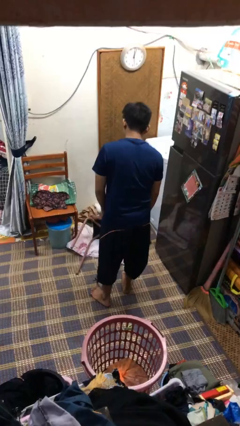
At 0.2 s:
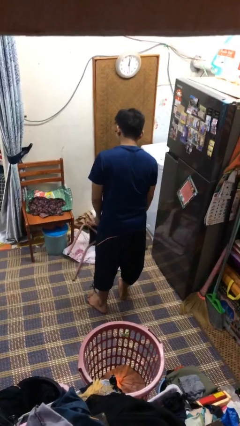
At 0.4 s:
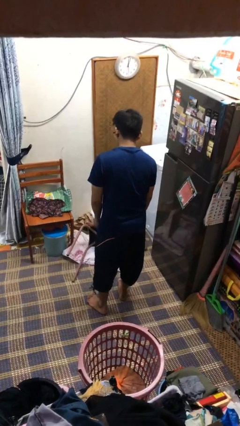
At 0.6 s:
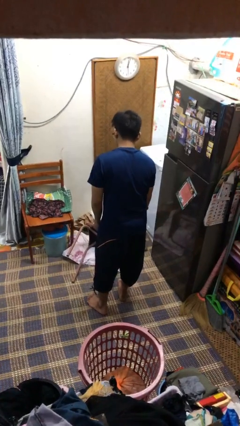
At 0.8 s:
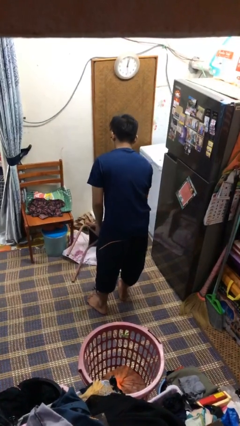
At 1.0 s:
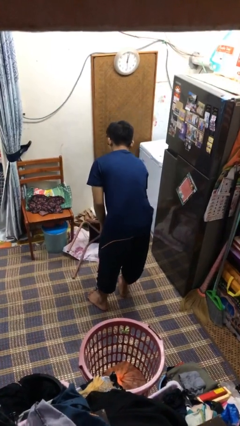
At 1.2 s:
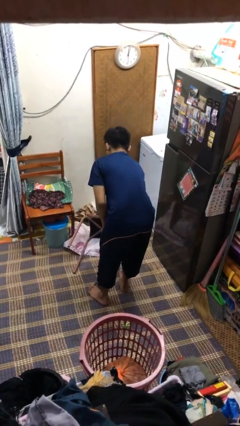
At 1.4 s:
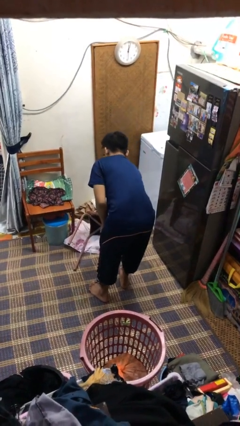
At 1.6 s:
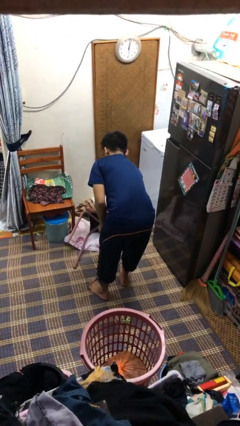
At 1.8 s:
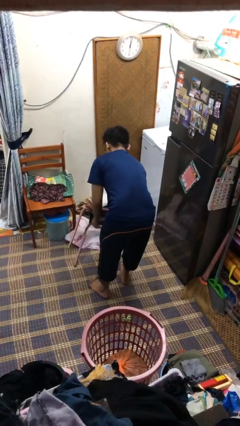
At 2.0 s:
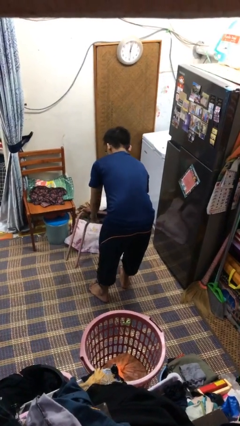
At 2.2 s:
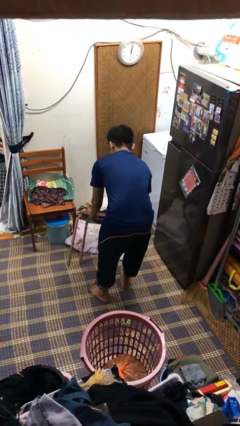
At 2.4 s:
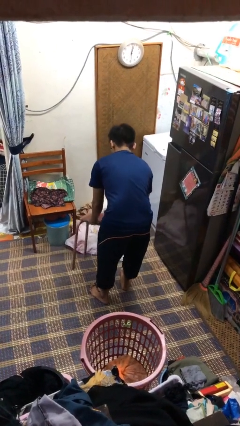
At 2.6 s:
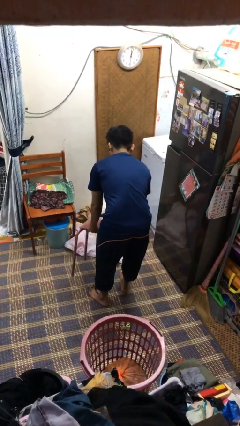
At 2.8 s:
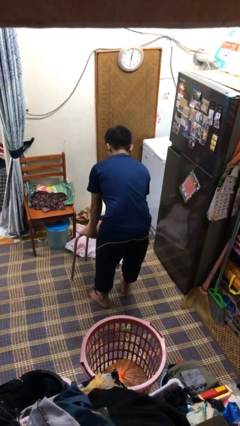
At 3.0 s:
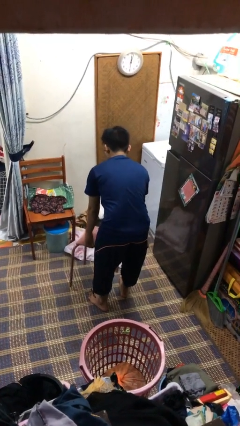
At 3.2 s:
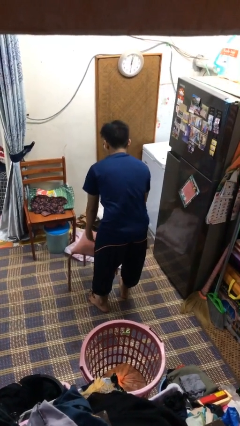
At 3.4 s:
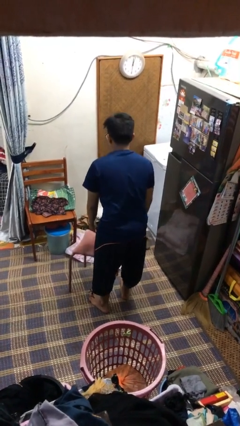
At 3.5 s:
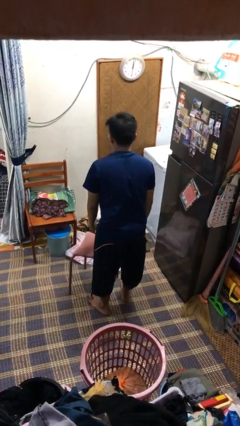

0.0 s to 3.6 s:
person sets upright furniture

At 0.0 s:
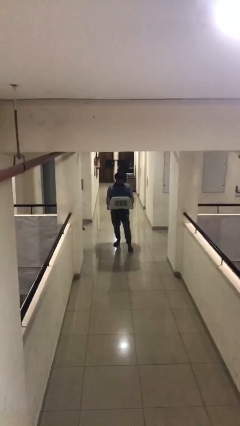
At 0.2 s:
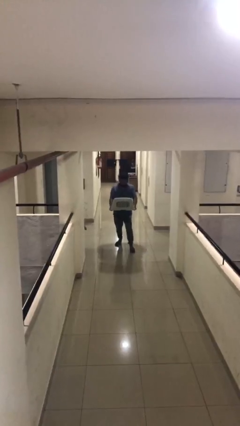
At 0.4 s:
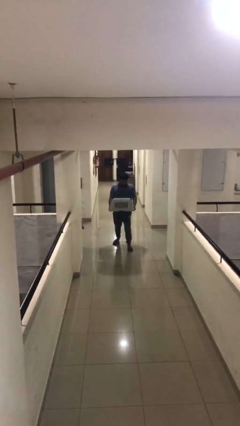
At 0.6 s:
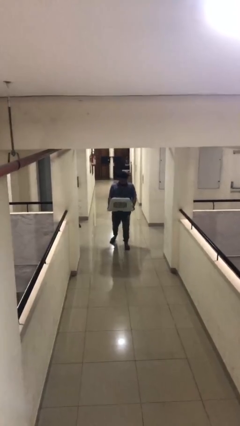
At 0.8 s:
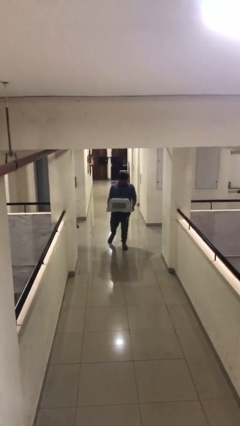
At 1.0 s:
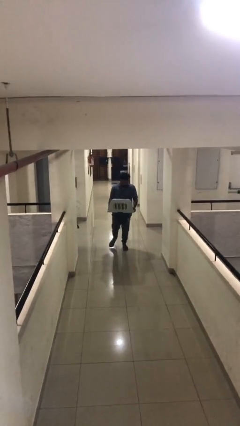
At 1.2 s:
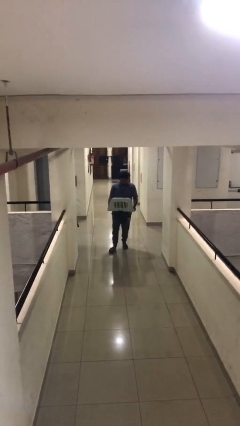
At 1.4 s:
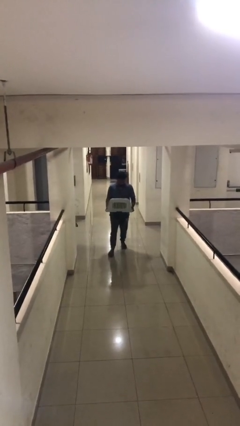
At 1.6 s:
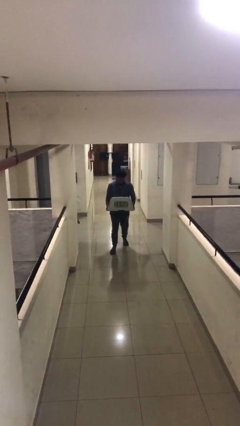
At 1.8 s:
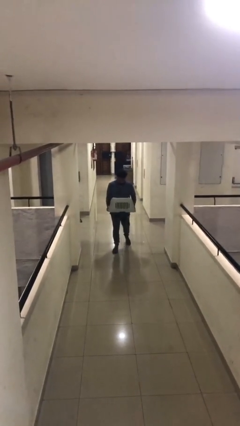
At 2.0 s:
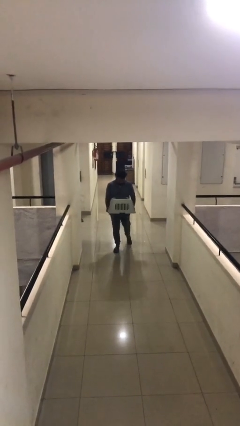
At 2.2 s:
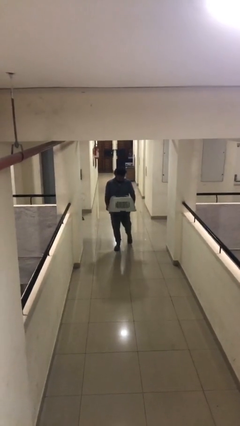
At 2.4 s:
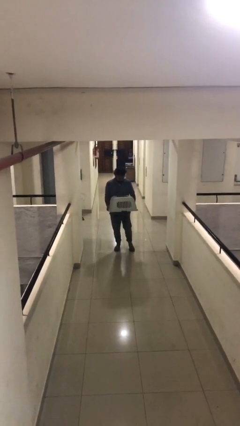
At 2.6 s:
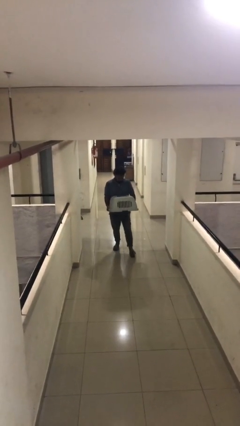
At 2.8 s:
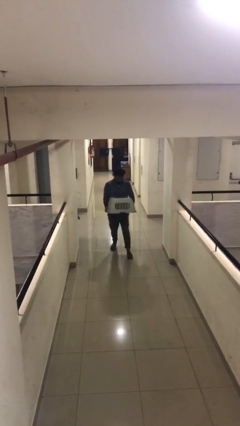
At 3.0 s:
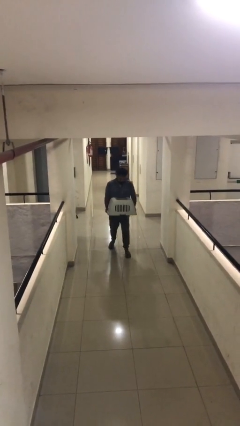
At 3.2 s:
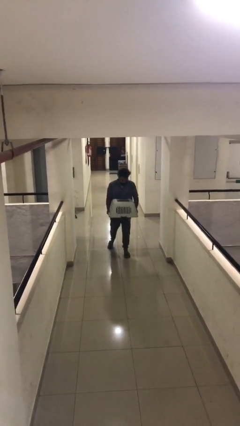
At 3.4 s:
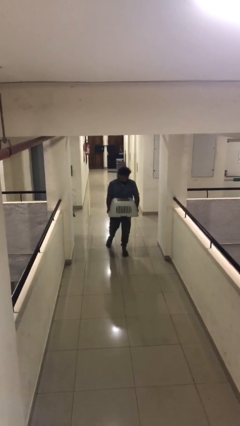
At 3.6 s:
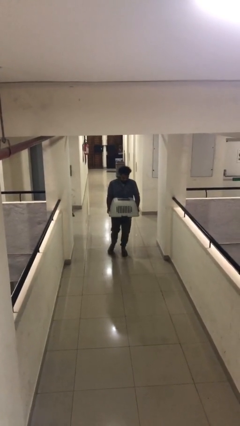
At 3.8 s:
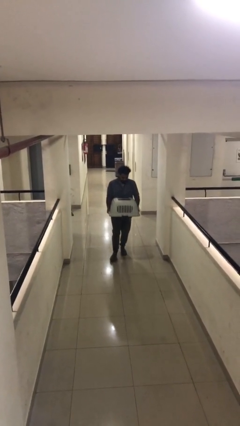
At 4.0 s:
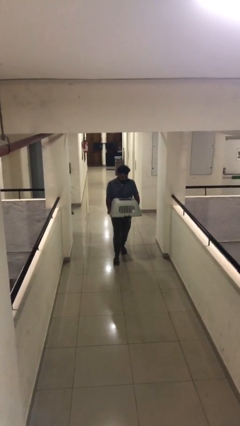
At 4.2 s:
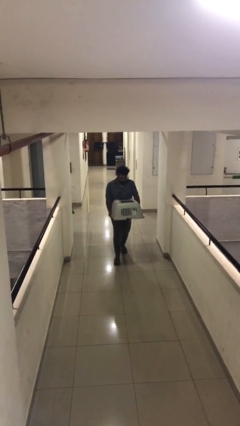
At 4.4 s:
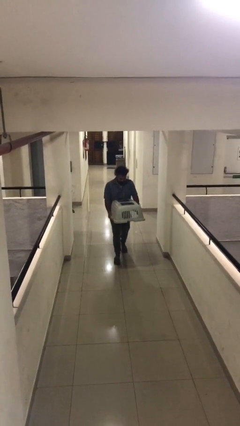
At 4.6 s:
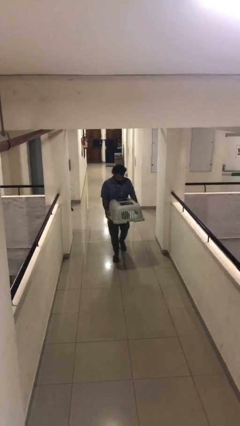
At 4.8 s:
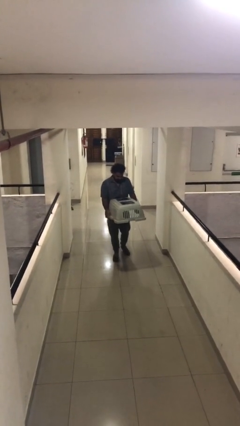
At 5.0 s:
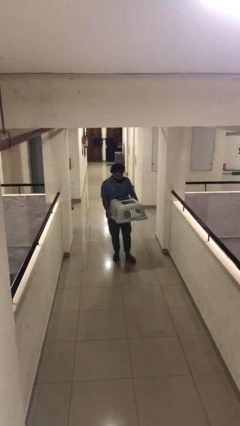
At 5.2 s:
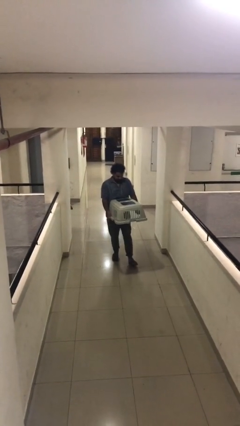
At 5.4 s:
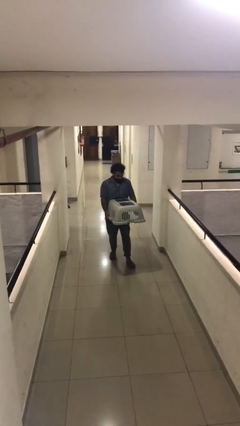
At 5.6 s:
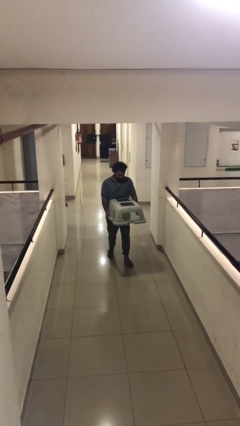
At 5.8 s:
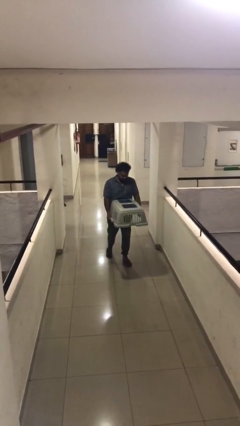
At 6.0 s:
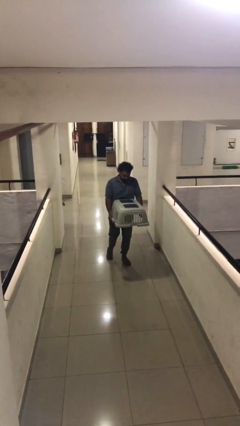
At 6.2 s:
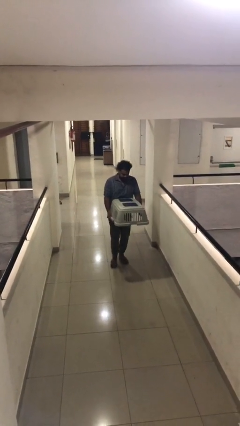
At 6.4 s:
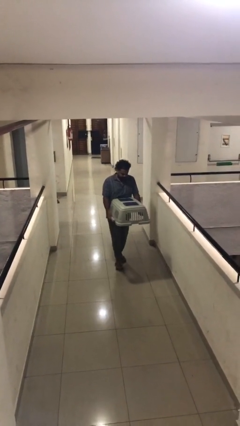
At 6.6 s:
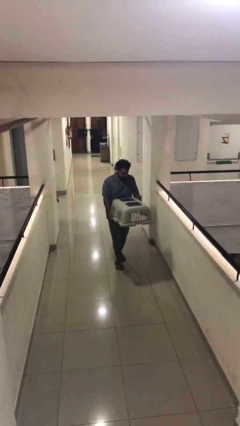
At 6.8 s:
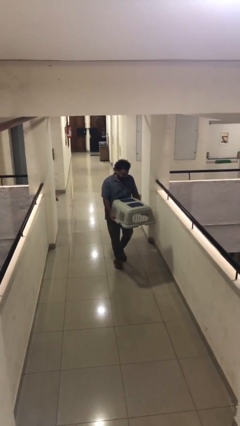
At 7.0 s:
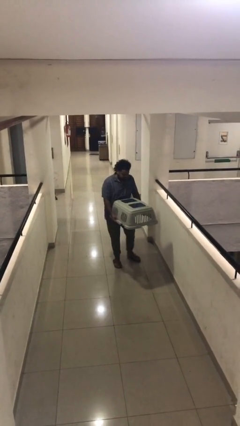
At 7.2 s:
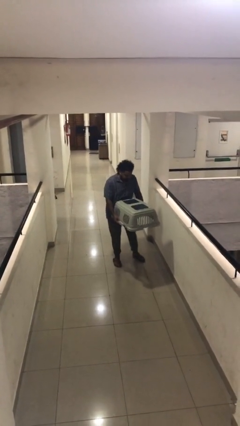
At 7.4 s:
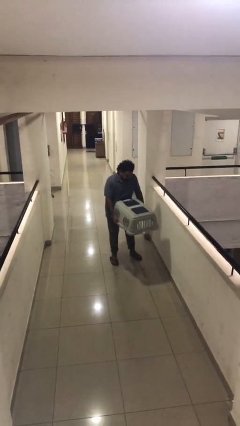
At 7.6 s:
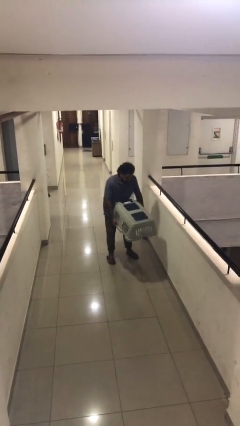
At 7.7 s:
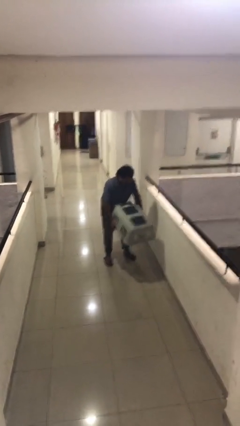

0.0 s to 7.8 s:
person carries heavy object

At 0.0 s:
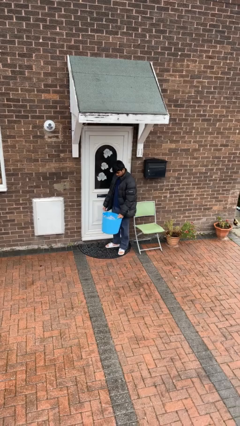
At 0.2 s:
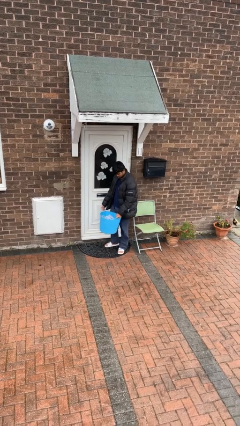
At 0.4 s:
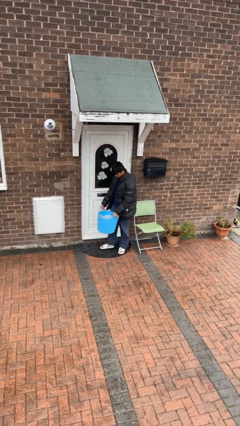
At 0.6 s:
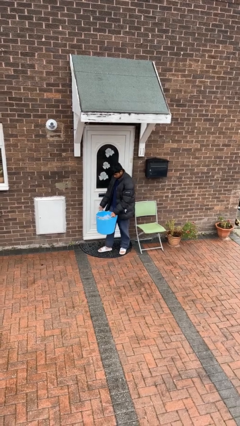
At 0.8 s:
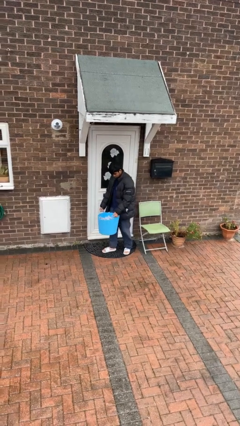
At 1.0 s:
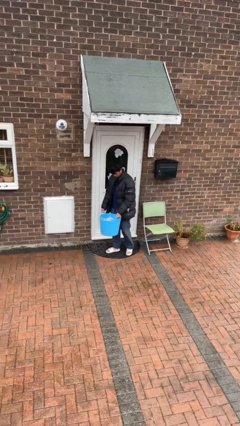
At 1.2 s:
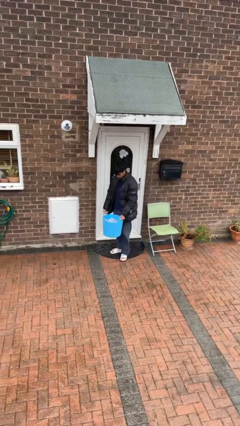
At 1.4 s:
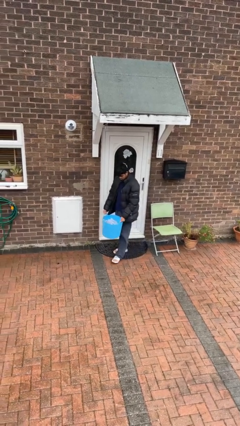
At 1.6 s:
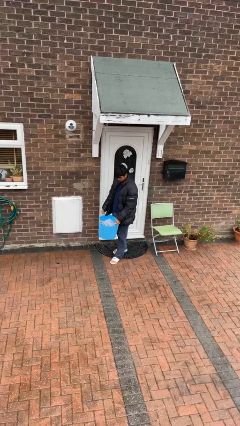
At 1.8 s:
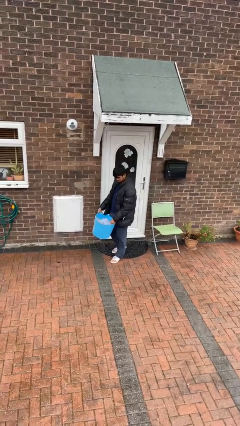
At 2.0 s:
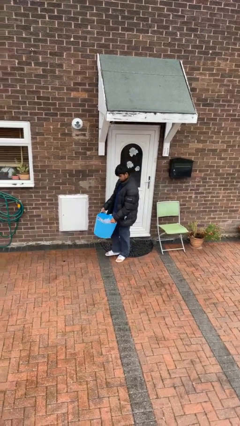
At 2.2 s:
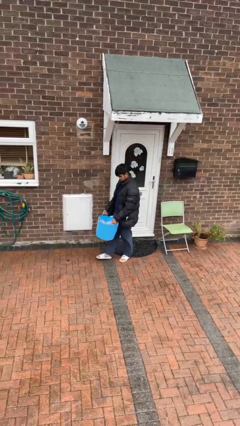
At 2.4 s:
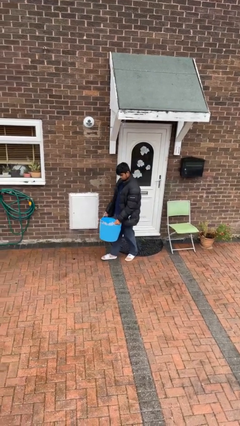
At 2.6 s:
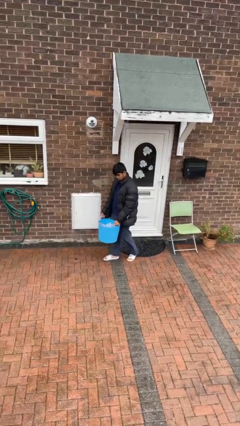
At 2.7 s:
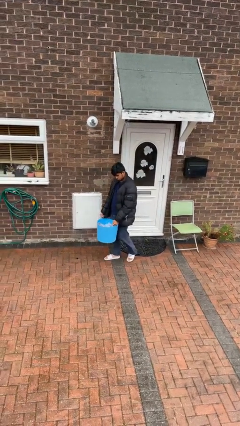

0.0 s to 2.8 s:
person carries laundry basket

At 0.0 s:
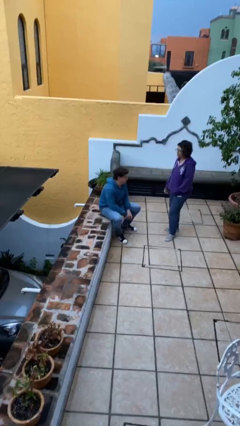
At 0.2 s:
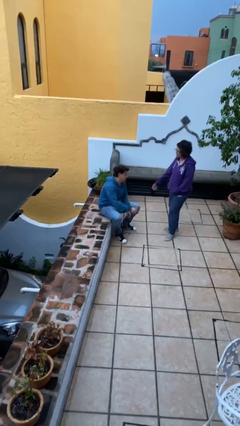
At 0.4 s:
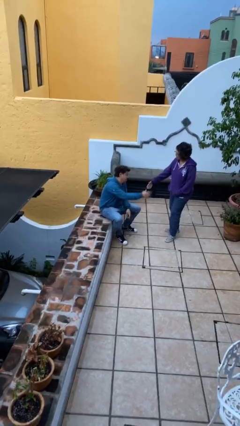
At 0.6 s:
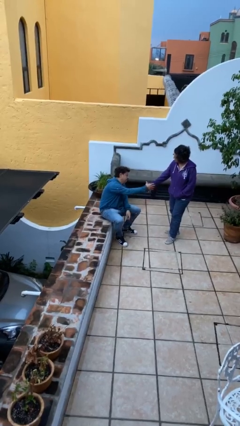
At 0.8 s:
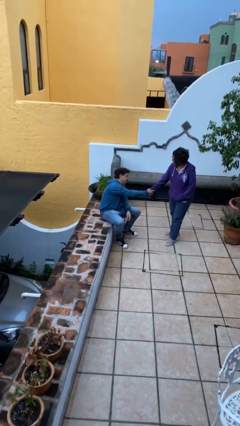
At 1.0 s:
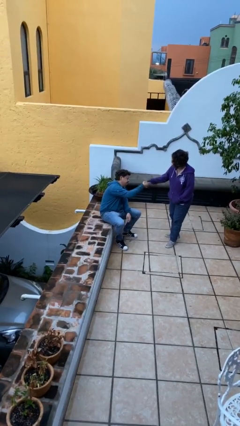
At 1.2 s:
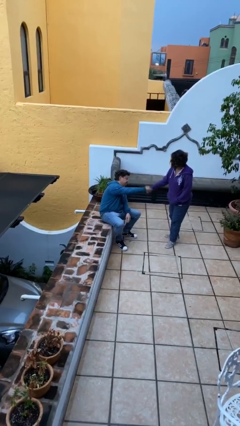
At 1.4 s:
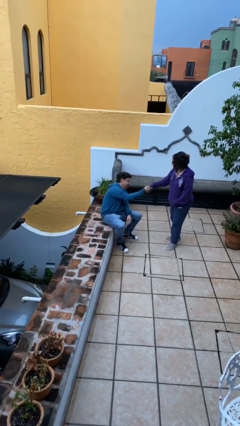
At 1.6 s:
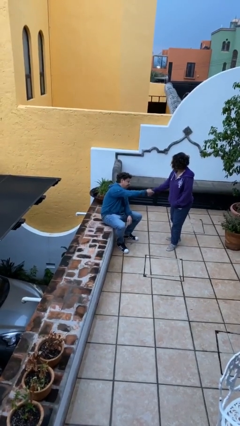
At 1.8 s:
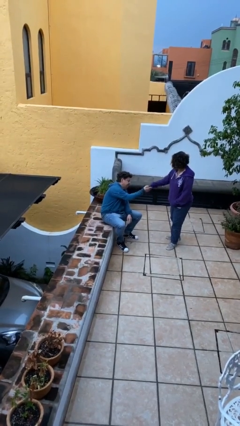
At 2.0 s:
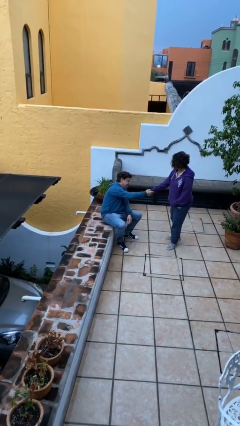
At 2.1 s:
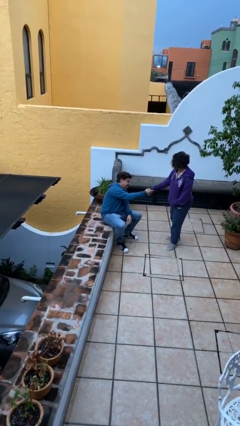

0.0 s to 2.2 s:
person shakes hand

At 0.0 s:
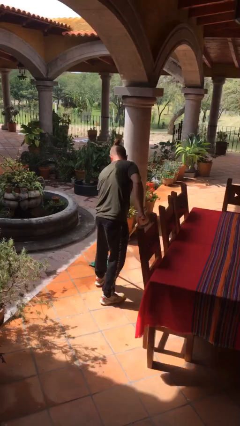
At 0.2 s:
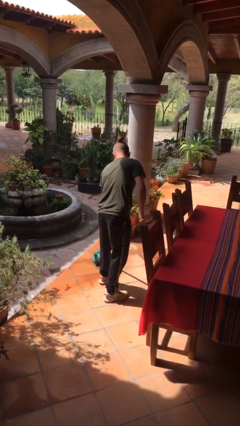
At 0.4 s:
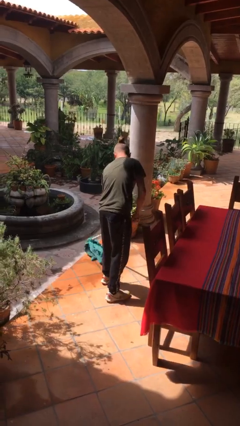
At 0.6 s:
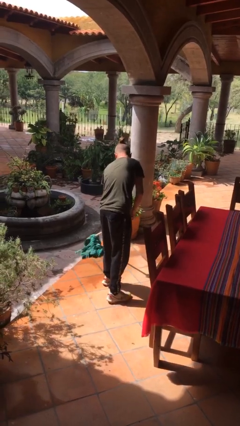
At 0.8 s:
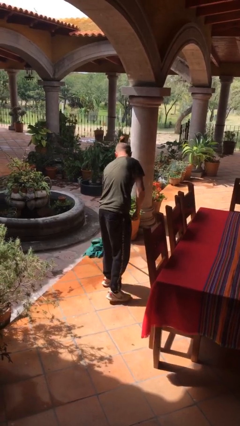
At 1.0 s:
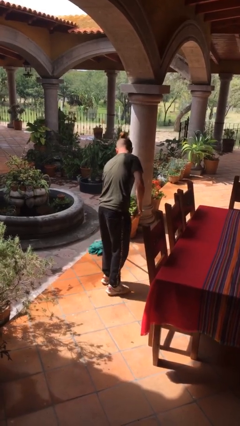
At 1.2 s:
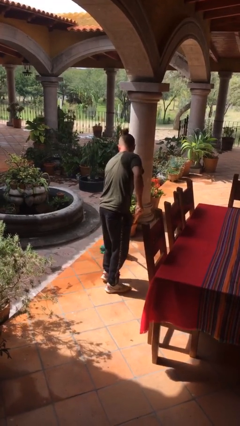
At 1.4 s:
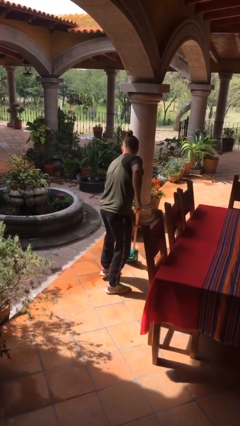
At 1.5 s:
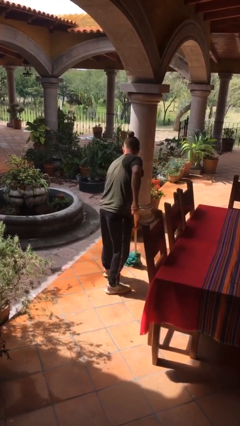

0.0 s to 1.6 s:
person mops
